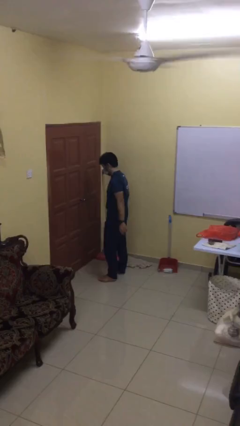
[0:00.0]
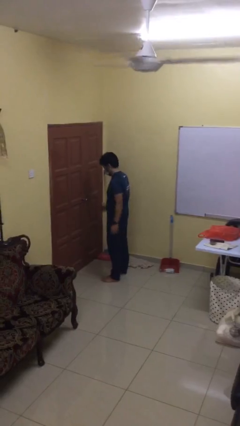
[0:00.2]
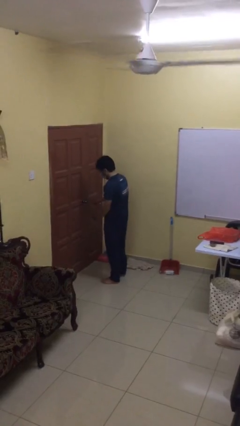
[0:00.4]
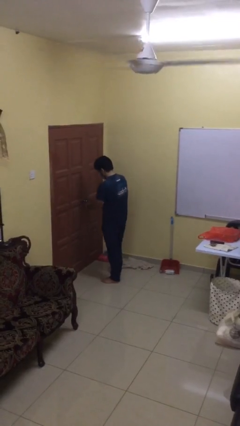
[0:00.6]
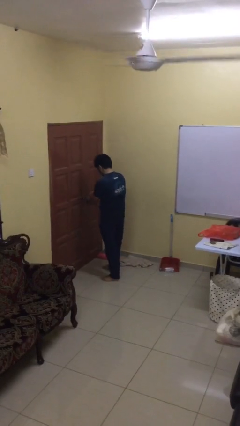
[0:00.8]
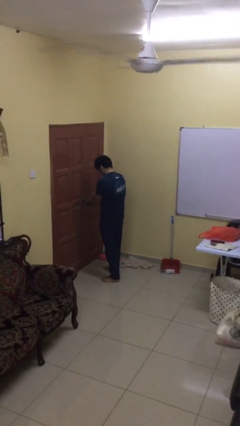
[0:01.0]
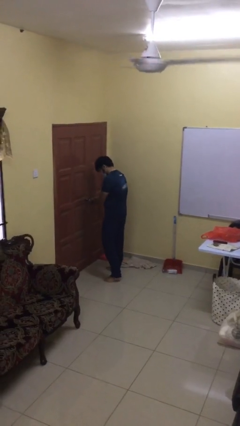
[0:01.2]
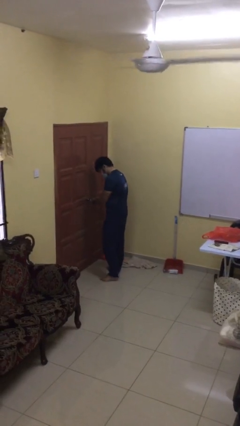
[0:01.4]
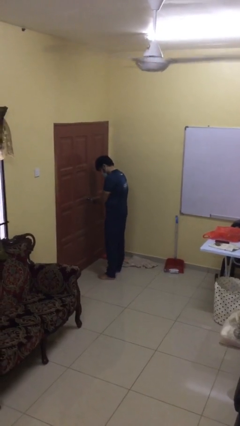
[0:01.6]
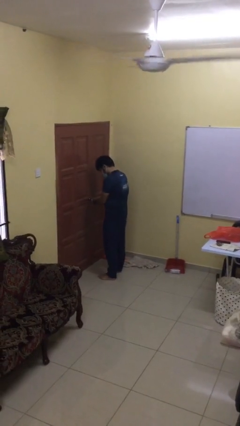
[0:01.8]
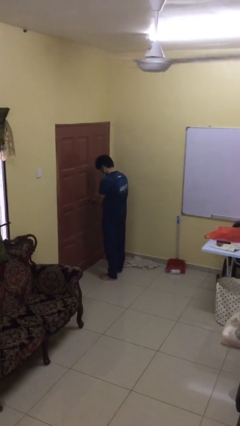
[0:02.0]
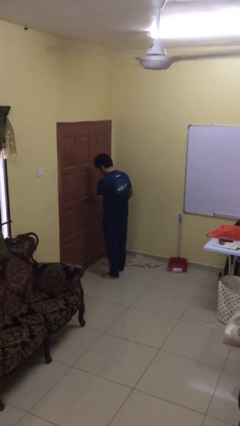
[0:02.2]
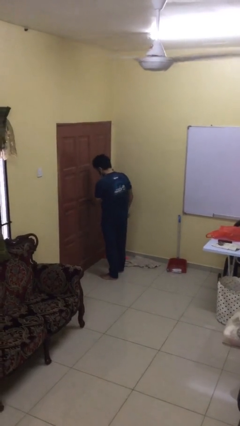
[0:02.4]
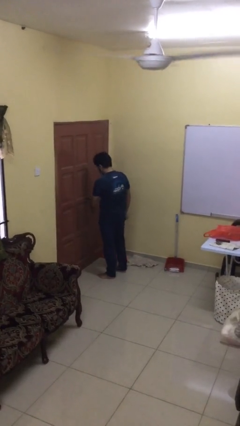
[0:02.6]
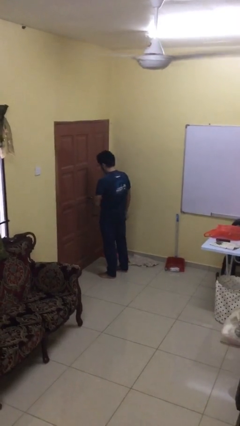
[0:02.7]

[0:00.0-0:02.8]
person locks door with keys

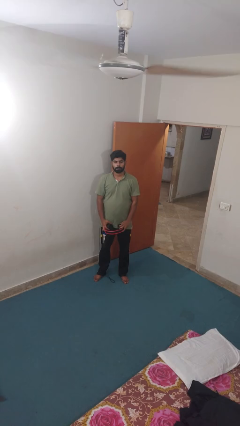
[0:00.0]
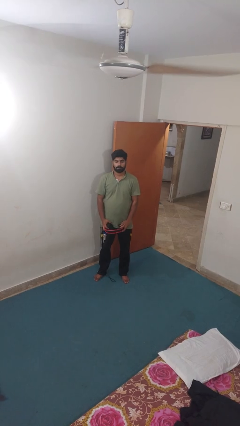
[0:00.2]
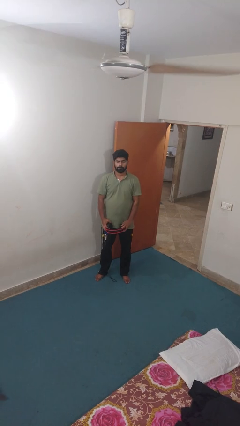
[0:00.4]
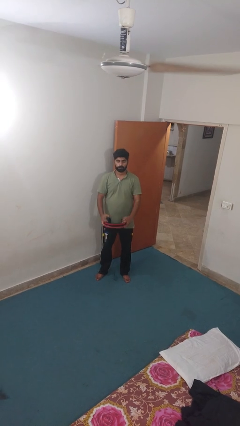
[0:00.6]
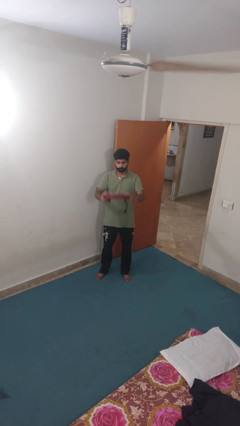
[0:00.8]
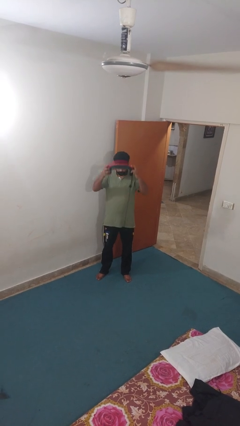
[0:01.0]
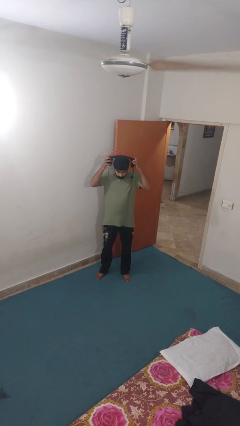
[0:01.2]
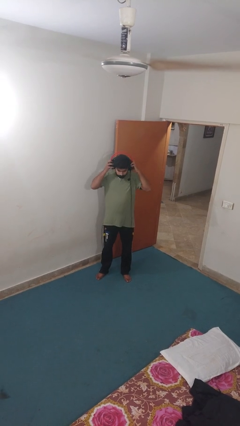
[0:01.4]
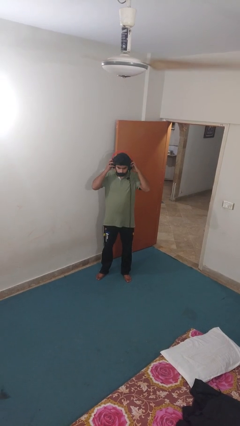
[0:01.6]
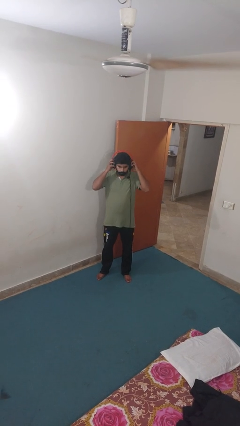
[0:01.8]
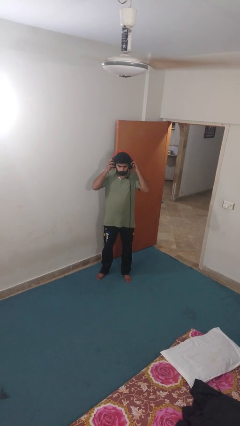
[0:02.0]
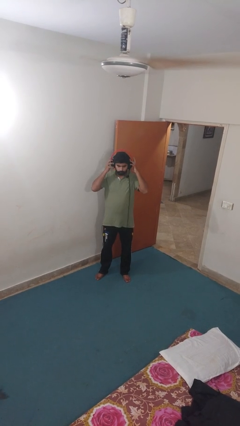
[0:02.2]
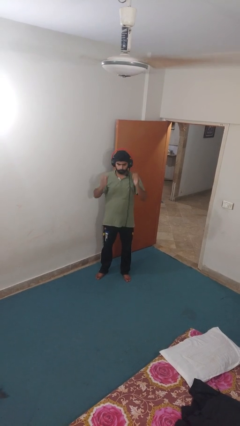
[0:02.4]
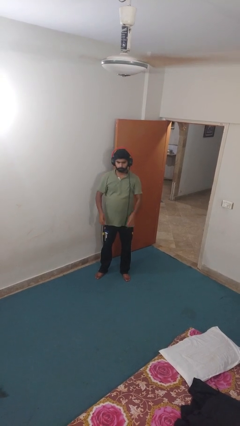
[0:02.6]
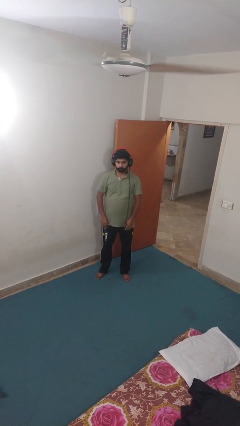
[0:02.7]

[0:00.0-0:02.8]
person puts on headphones

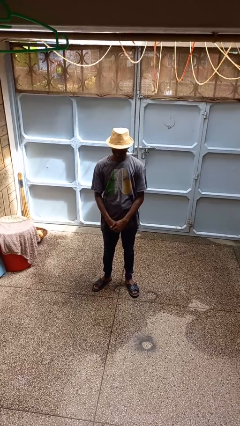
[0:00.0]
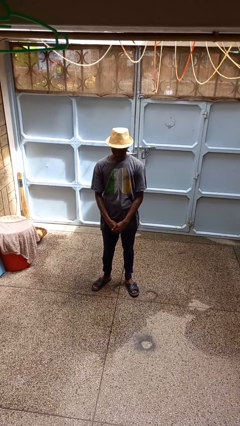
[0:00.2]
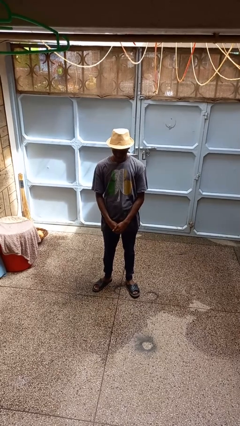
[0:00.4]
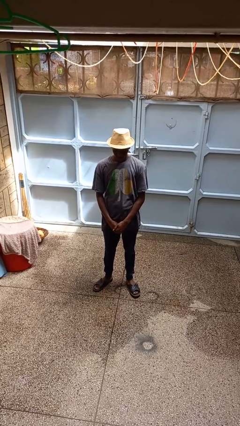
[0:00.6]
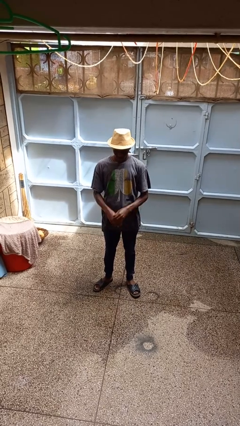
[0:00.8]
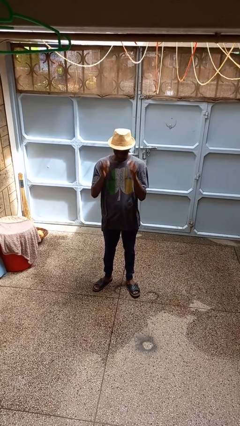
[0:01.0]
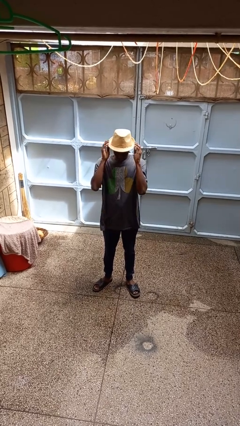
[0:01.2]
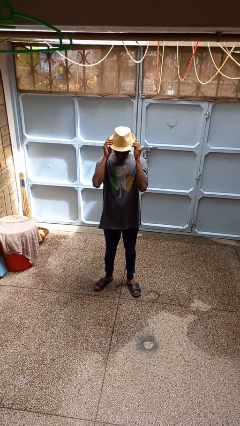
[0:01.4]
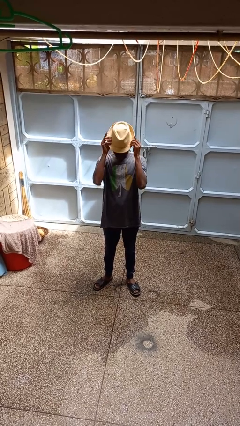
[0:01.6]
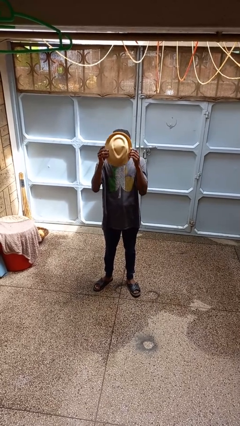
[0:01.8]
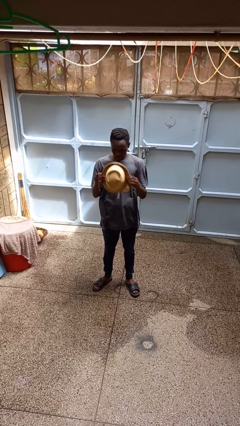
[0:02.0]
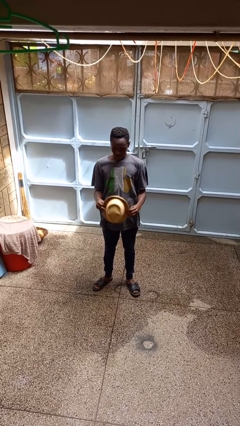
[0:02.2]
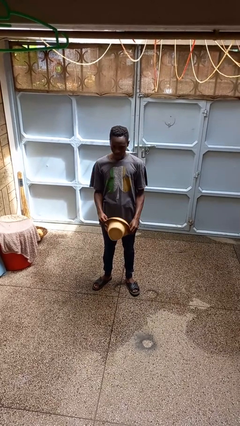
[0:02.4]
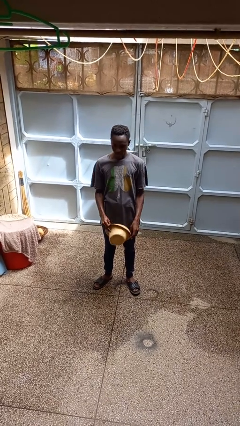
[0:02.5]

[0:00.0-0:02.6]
person takes off hat

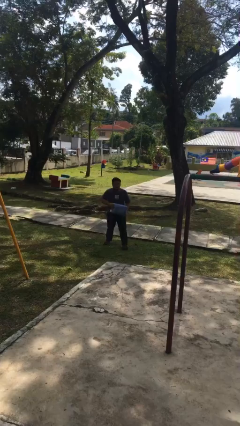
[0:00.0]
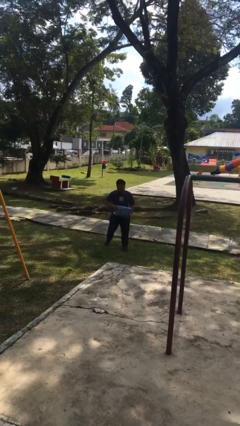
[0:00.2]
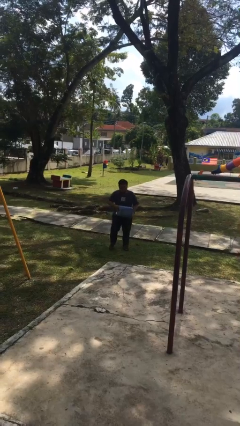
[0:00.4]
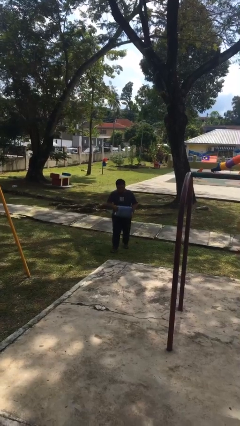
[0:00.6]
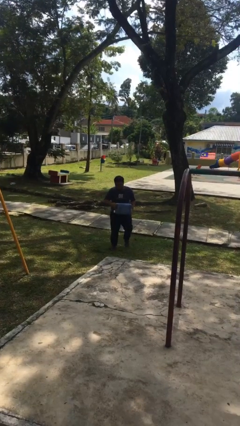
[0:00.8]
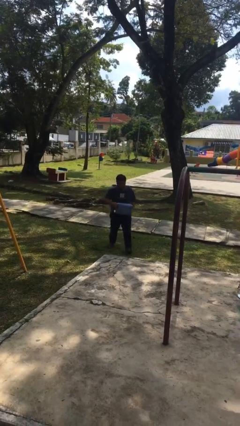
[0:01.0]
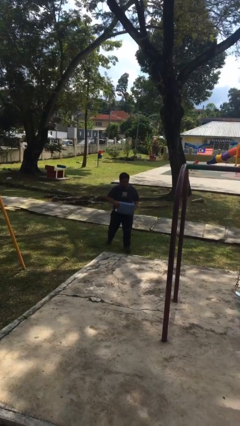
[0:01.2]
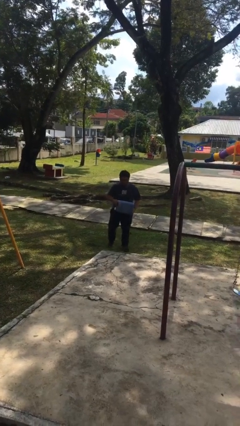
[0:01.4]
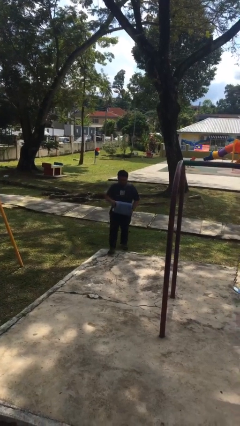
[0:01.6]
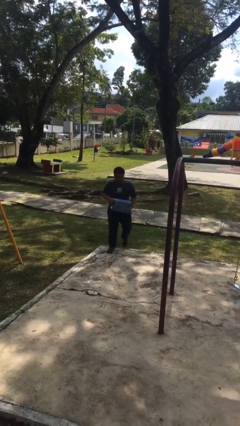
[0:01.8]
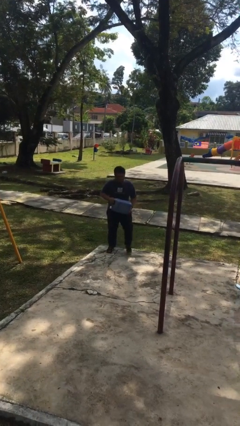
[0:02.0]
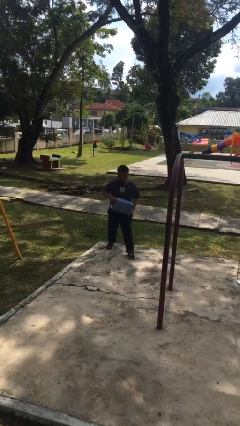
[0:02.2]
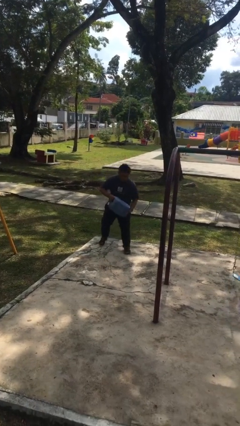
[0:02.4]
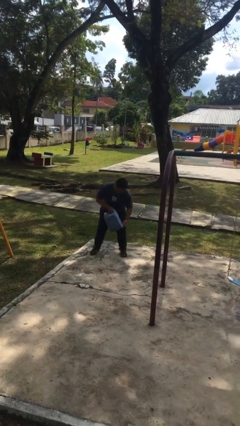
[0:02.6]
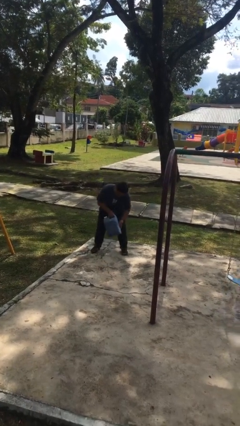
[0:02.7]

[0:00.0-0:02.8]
person carries heavy object

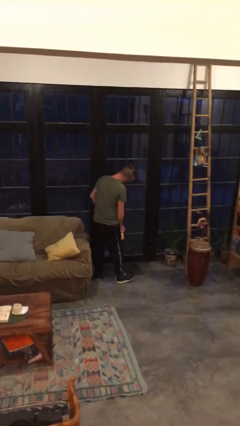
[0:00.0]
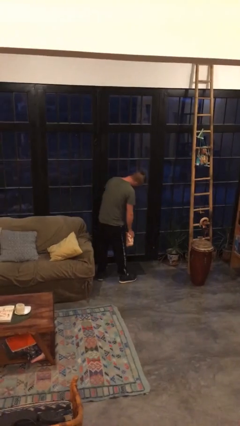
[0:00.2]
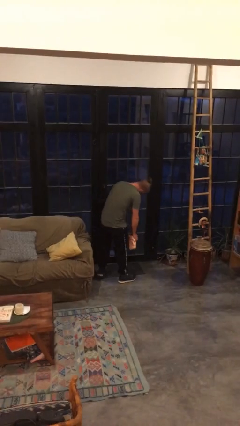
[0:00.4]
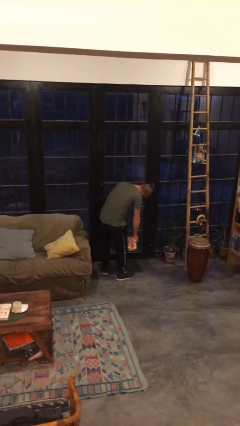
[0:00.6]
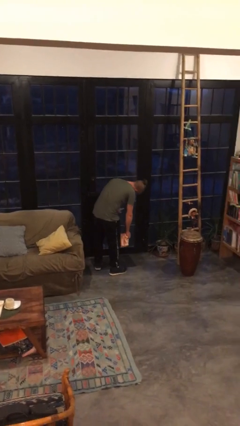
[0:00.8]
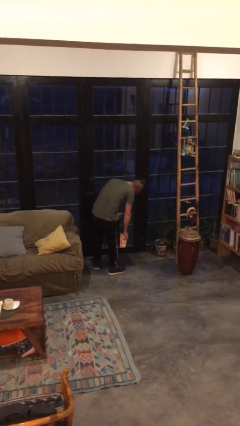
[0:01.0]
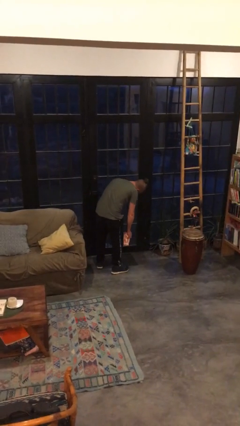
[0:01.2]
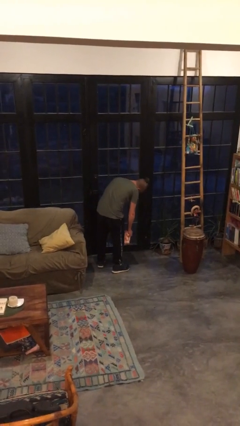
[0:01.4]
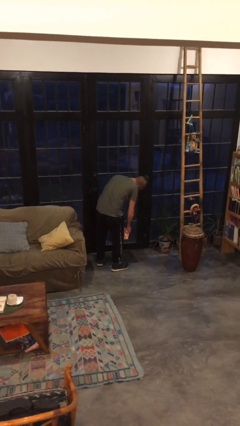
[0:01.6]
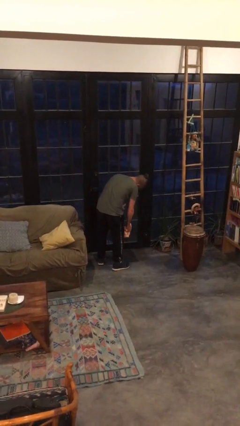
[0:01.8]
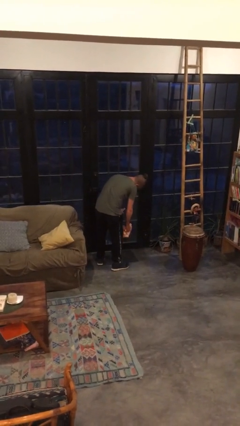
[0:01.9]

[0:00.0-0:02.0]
person sprays from bottle

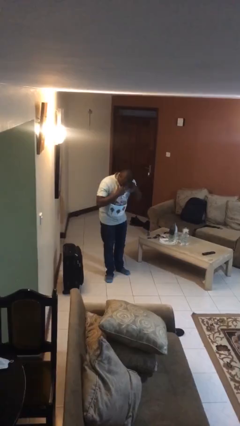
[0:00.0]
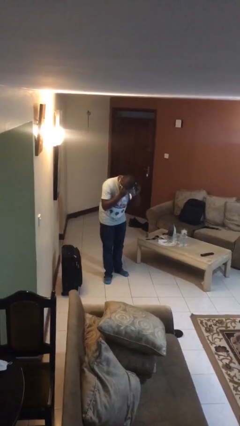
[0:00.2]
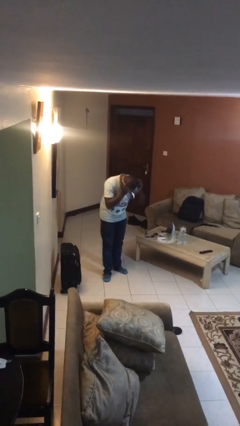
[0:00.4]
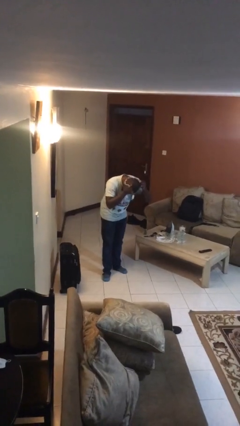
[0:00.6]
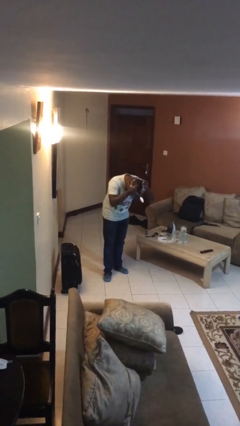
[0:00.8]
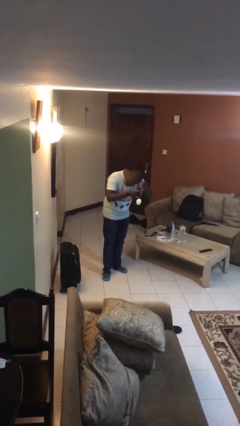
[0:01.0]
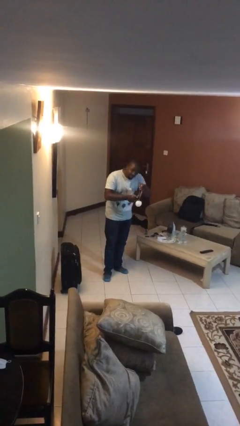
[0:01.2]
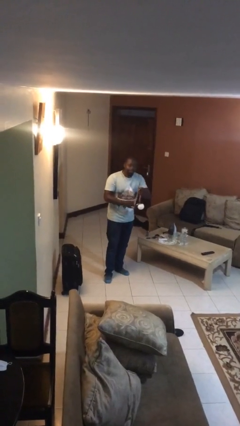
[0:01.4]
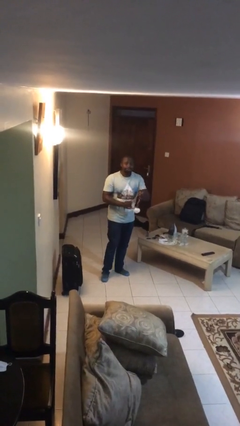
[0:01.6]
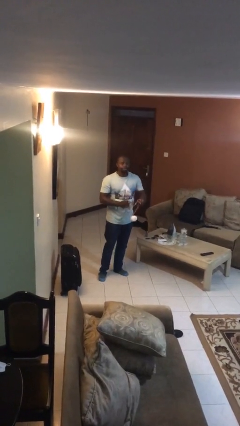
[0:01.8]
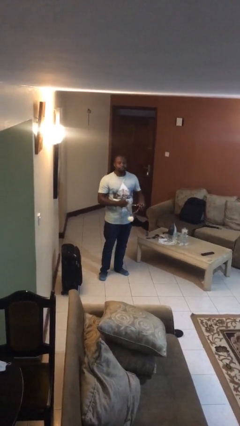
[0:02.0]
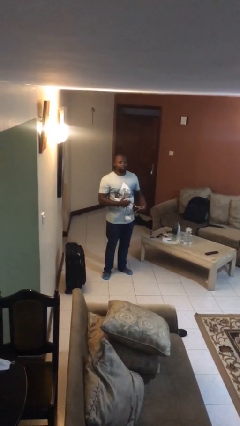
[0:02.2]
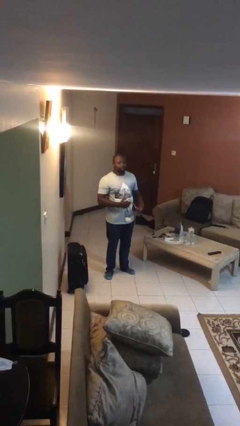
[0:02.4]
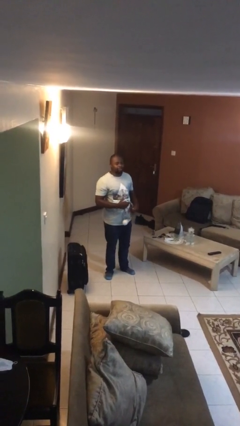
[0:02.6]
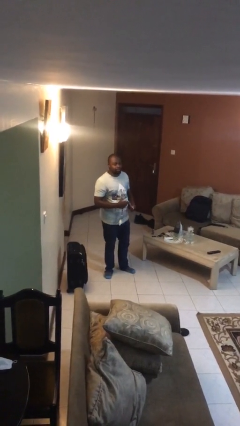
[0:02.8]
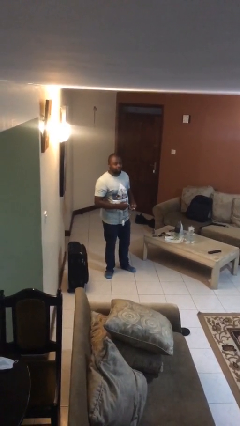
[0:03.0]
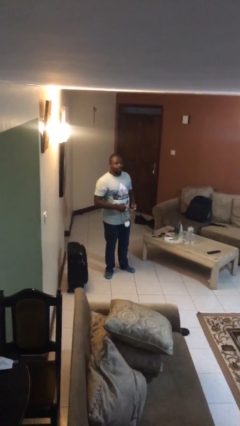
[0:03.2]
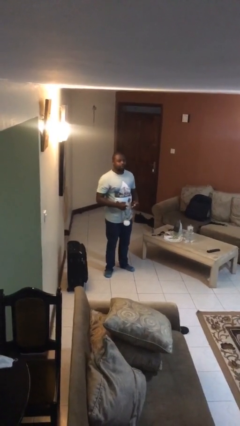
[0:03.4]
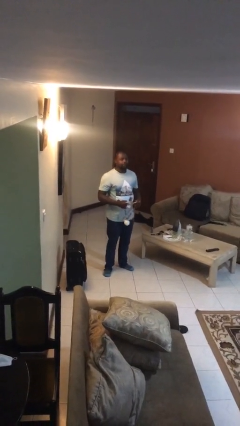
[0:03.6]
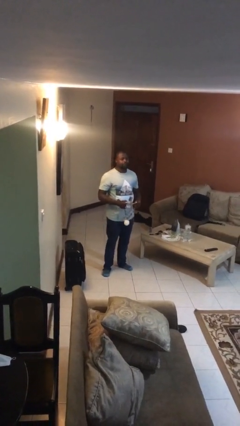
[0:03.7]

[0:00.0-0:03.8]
person takes off necklace

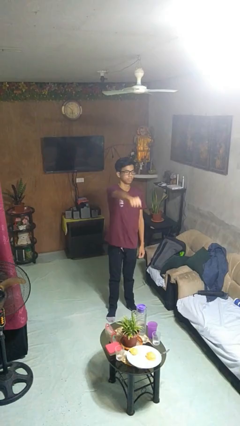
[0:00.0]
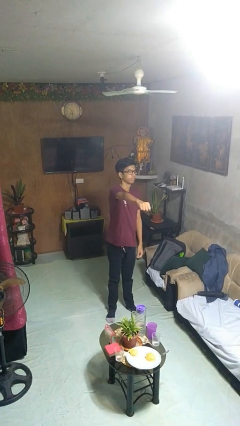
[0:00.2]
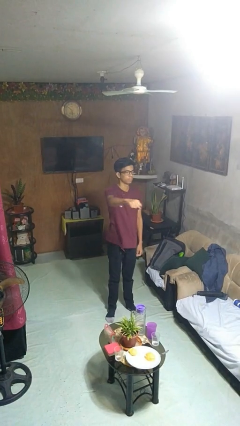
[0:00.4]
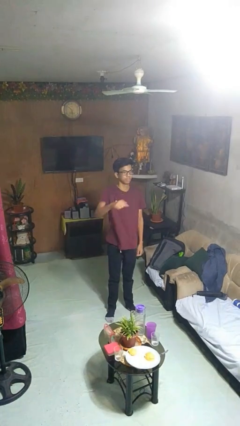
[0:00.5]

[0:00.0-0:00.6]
person punches
